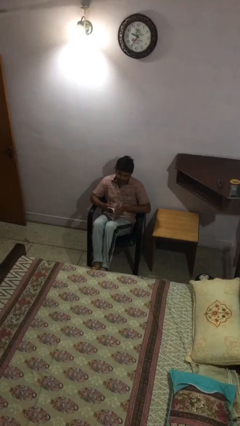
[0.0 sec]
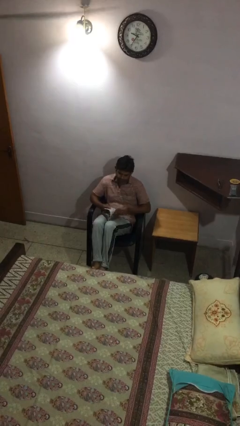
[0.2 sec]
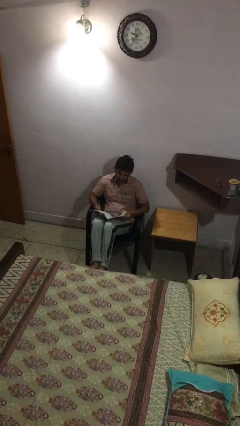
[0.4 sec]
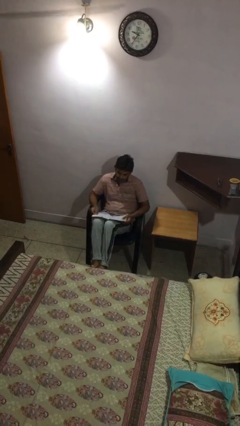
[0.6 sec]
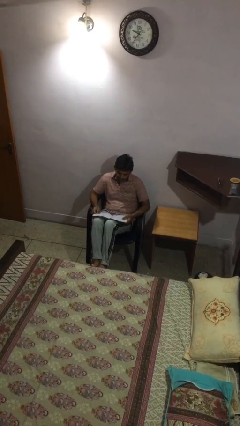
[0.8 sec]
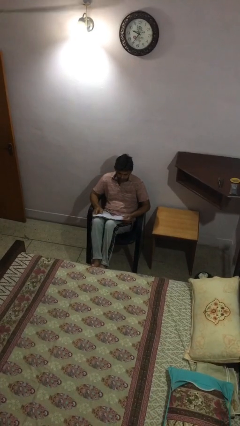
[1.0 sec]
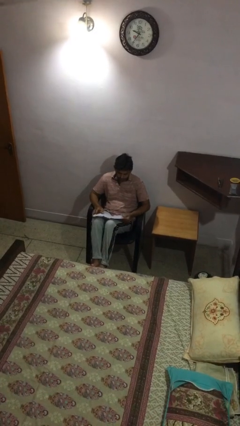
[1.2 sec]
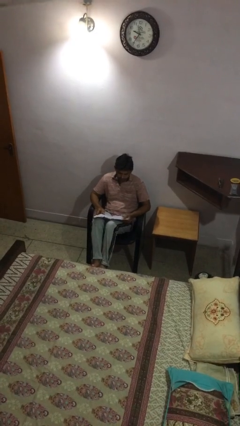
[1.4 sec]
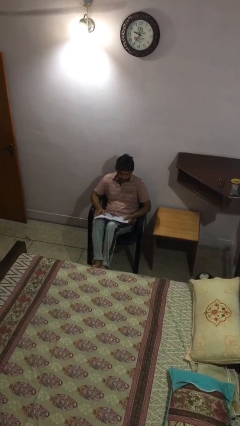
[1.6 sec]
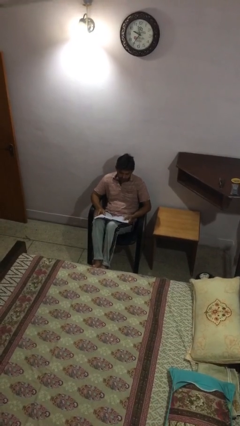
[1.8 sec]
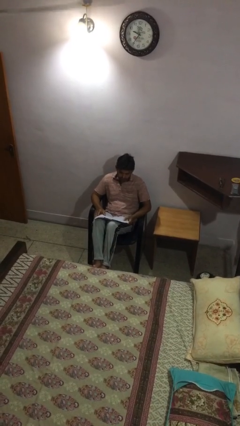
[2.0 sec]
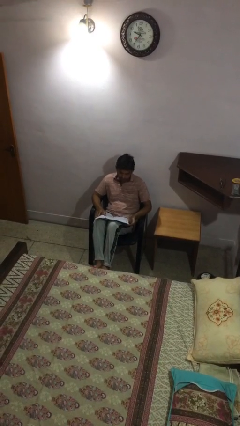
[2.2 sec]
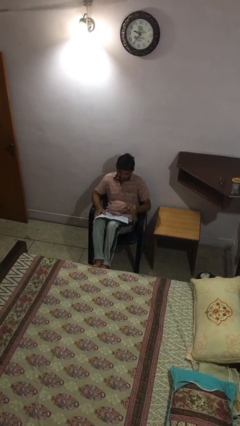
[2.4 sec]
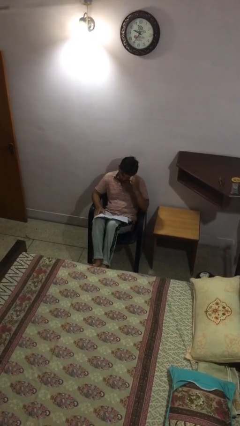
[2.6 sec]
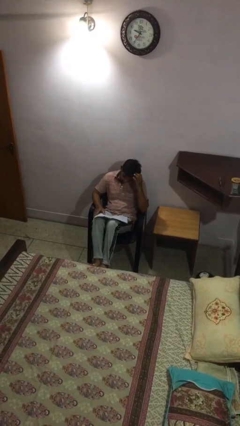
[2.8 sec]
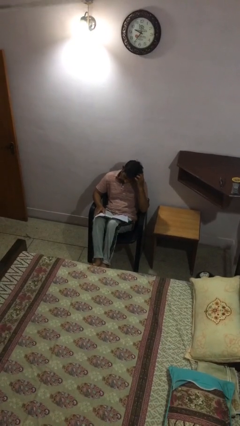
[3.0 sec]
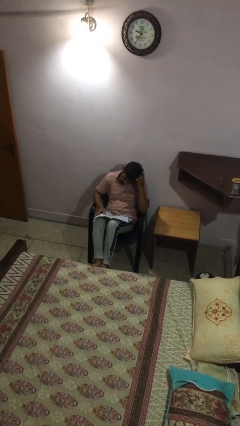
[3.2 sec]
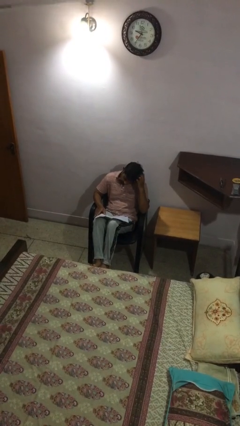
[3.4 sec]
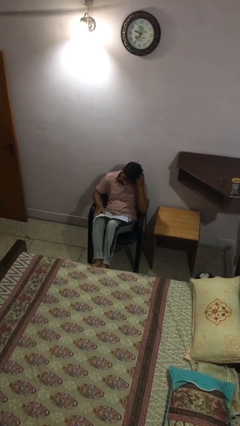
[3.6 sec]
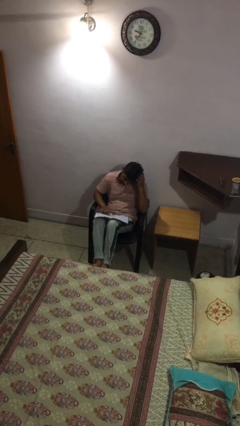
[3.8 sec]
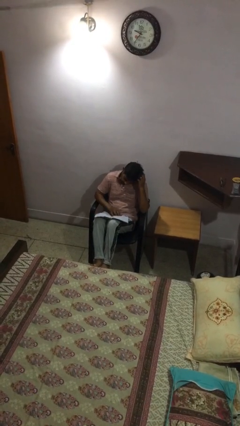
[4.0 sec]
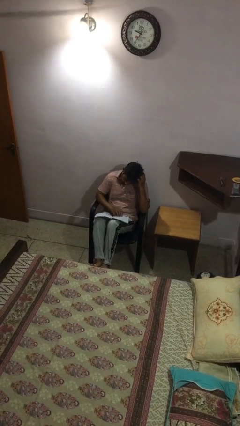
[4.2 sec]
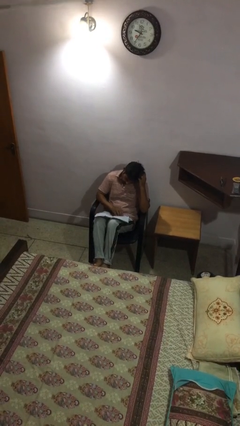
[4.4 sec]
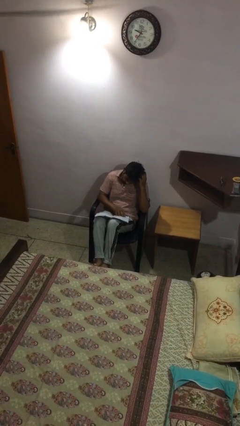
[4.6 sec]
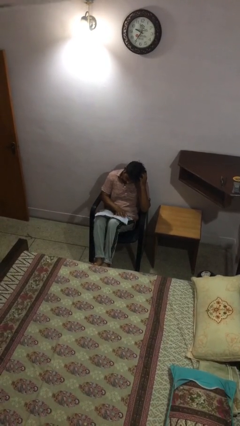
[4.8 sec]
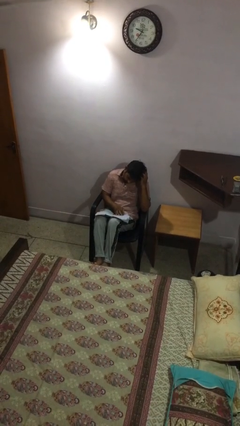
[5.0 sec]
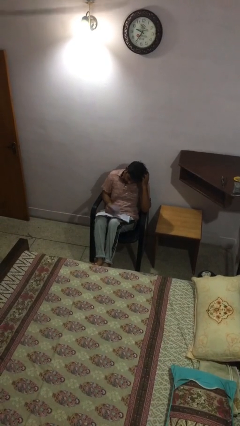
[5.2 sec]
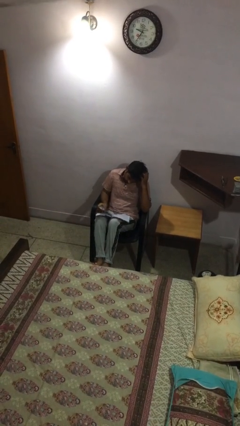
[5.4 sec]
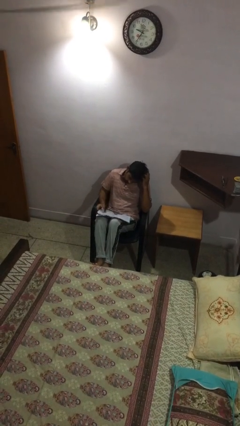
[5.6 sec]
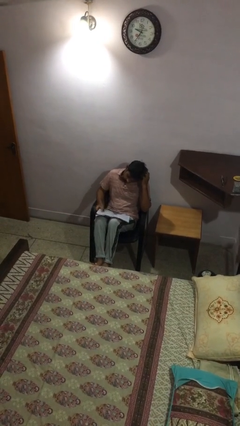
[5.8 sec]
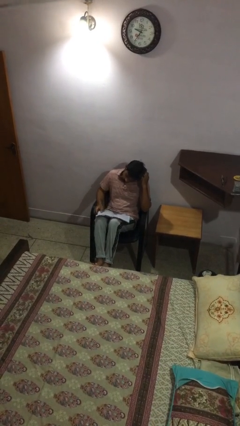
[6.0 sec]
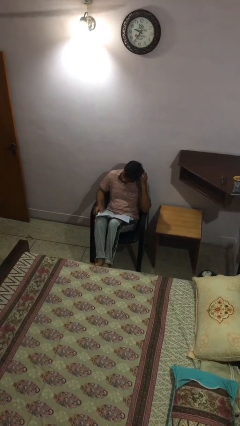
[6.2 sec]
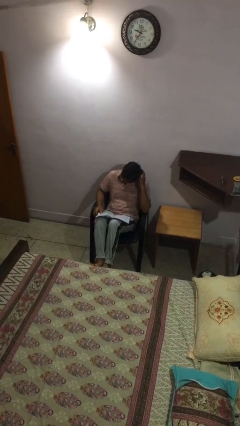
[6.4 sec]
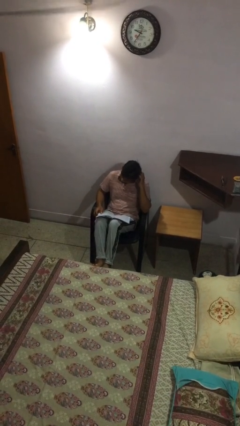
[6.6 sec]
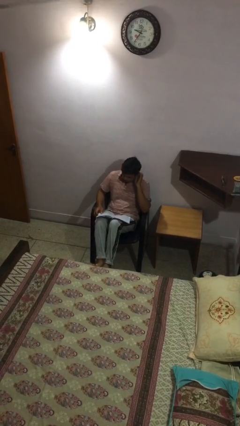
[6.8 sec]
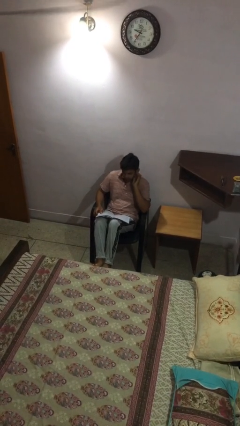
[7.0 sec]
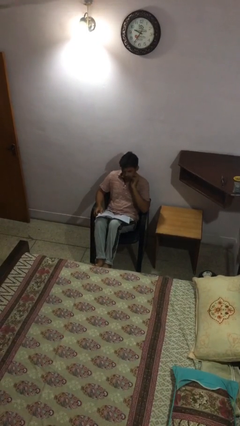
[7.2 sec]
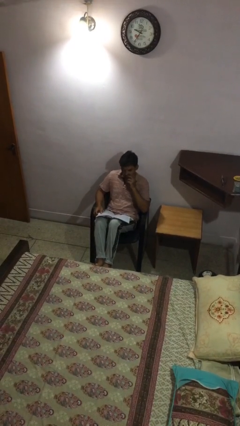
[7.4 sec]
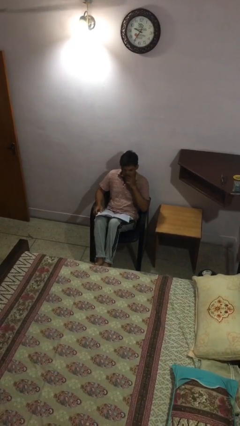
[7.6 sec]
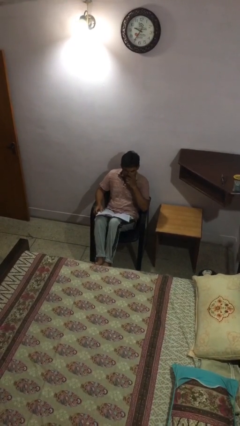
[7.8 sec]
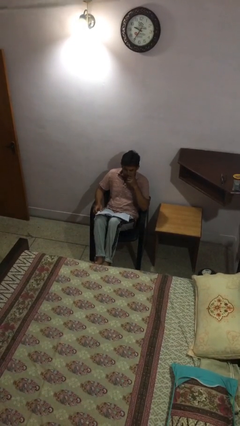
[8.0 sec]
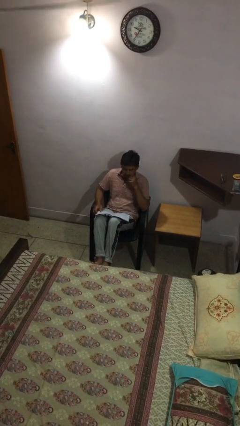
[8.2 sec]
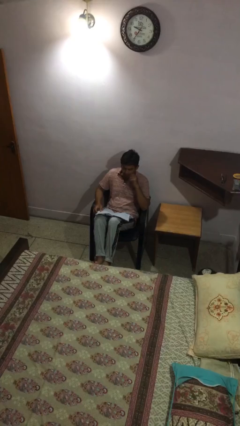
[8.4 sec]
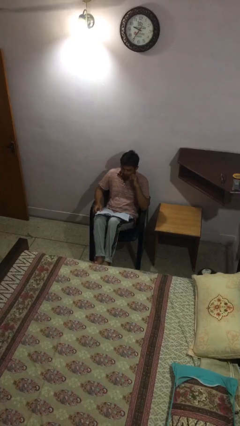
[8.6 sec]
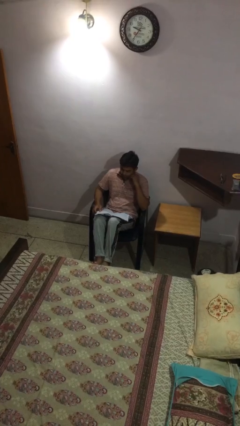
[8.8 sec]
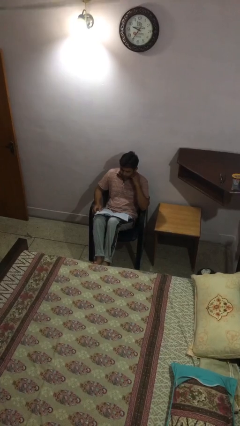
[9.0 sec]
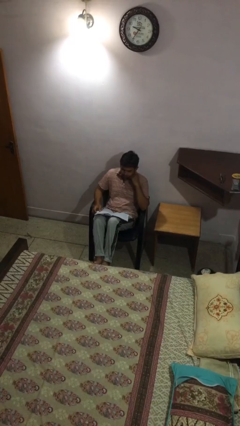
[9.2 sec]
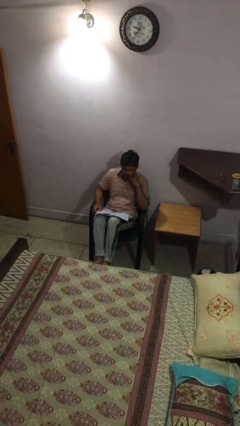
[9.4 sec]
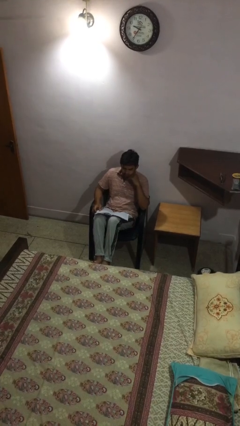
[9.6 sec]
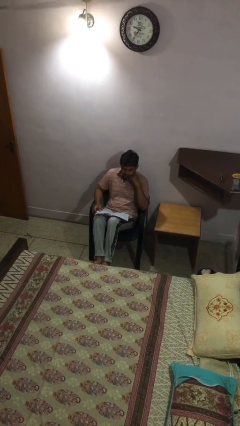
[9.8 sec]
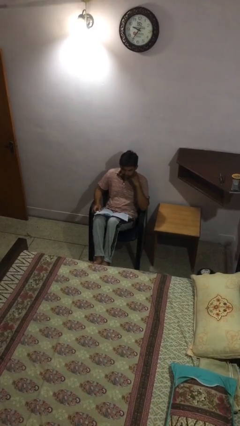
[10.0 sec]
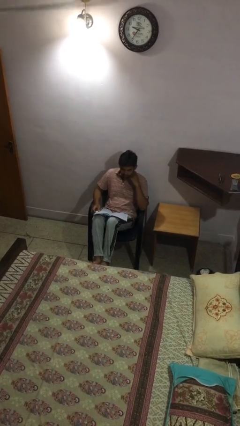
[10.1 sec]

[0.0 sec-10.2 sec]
person reads document

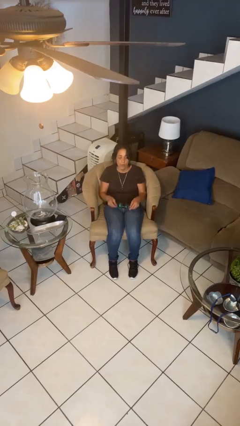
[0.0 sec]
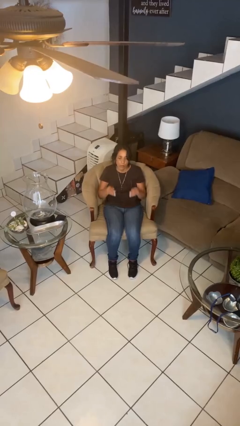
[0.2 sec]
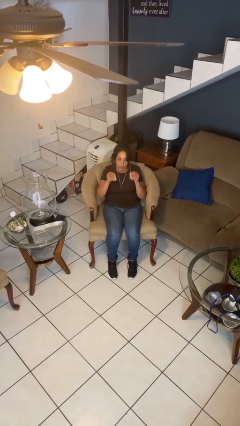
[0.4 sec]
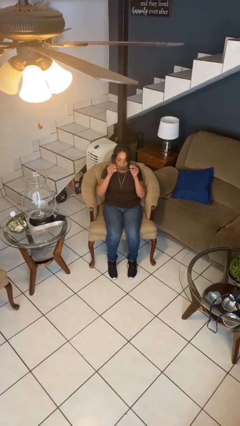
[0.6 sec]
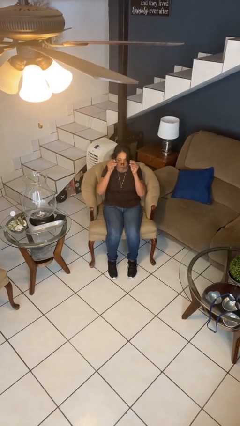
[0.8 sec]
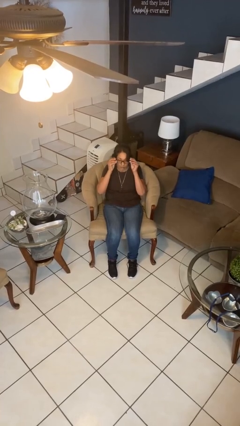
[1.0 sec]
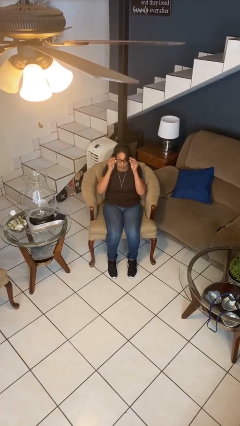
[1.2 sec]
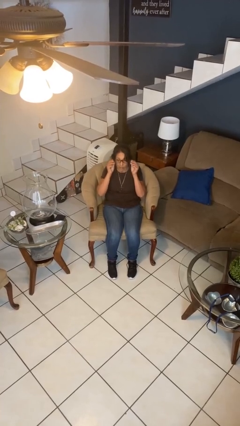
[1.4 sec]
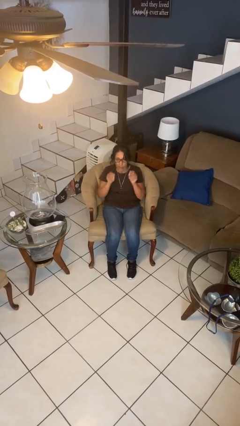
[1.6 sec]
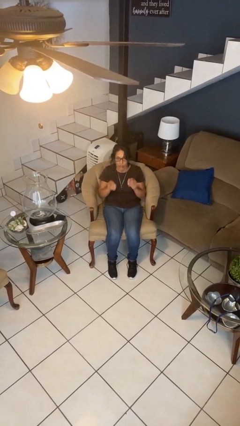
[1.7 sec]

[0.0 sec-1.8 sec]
person puts on glasses

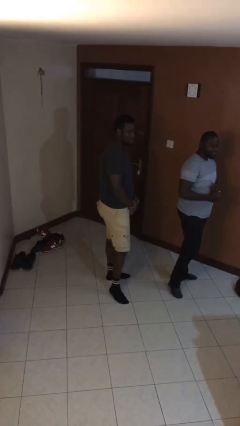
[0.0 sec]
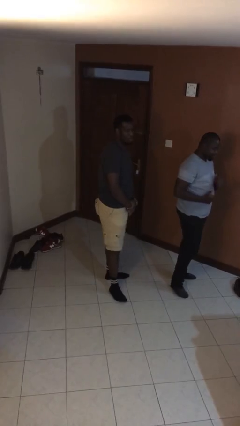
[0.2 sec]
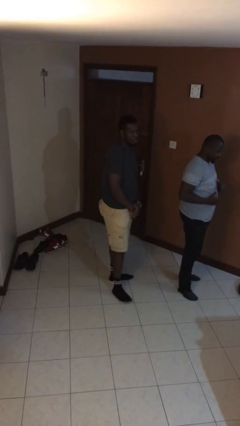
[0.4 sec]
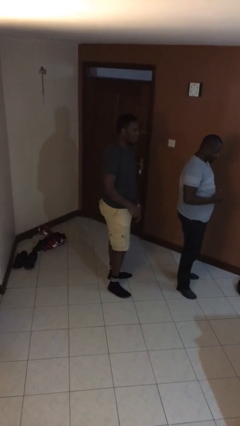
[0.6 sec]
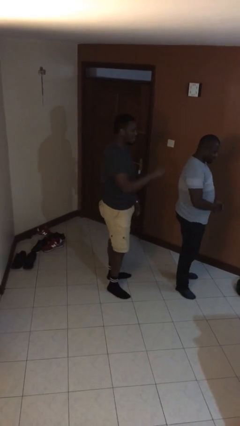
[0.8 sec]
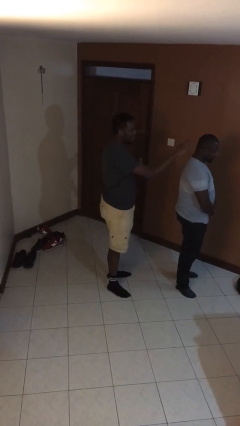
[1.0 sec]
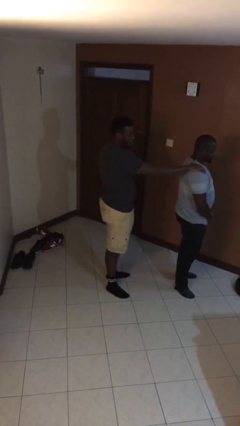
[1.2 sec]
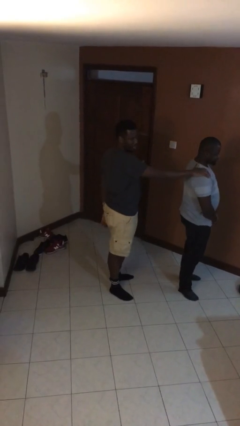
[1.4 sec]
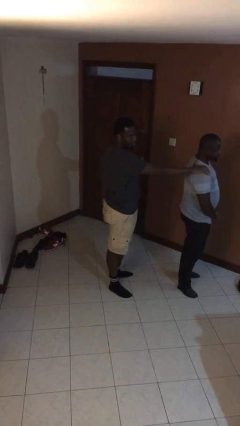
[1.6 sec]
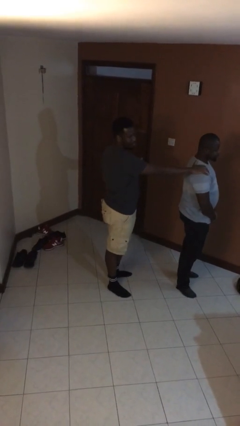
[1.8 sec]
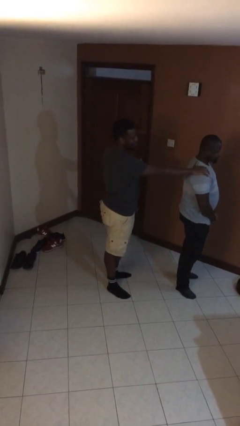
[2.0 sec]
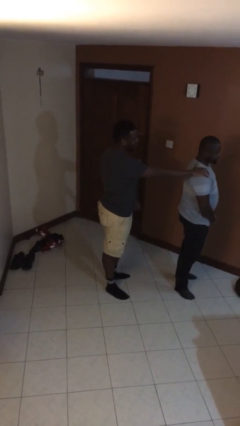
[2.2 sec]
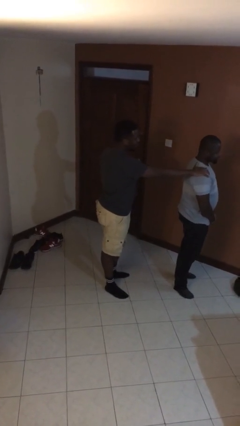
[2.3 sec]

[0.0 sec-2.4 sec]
person grabs person by shoulder

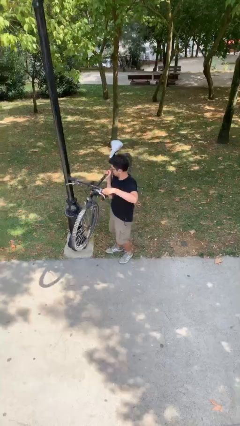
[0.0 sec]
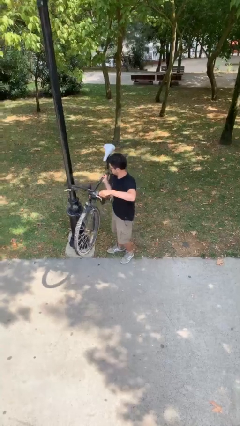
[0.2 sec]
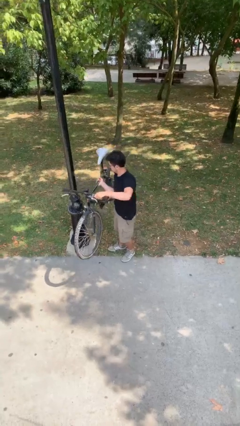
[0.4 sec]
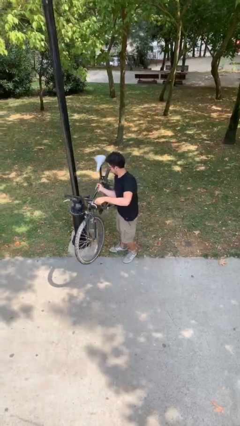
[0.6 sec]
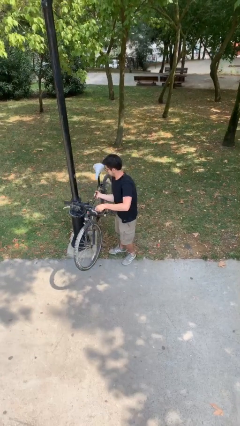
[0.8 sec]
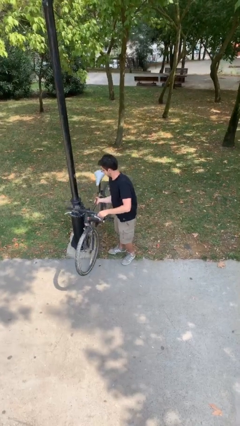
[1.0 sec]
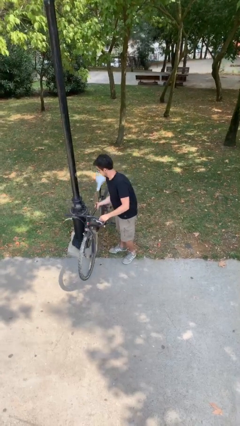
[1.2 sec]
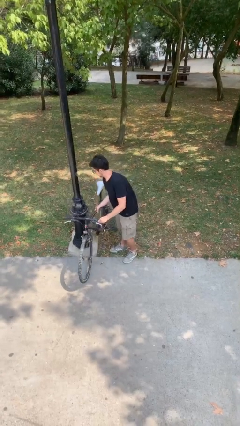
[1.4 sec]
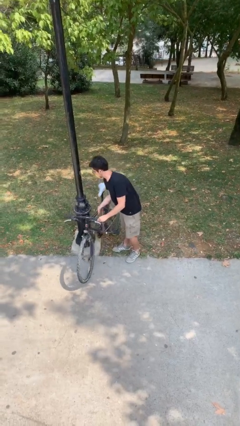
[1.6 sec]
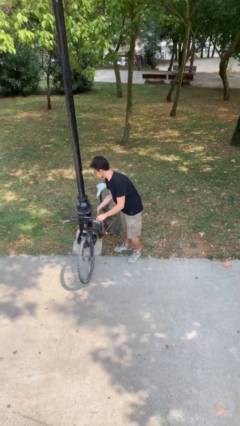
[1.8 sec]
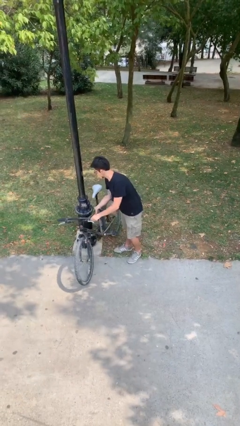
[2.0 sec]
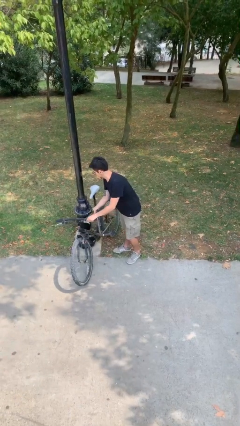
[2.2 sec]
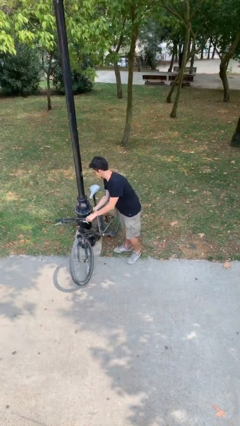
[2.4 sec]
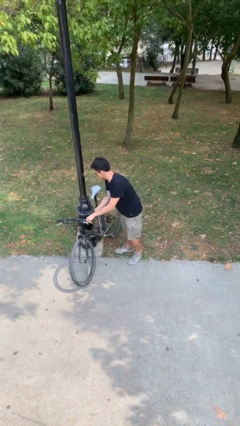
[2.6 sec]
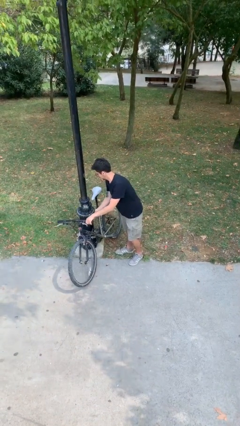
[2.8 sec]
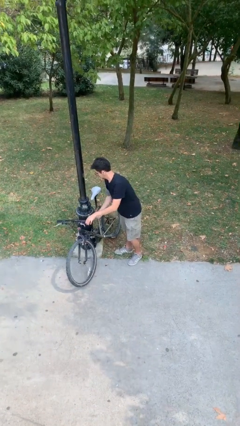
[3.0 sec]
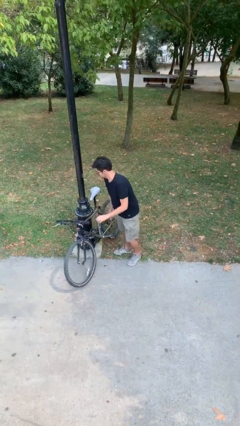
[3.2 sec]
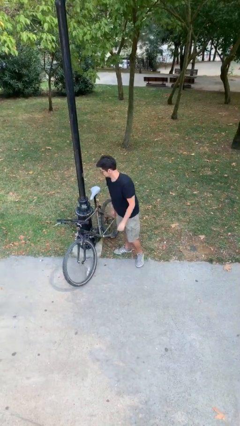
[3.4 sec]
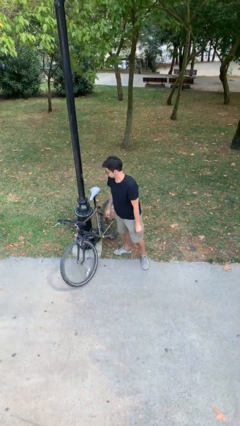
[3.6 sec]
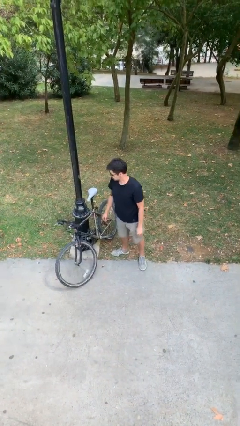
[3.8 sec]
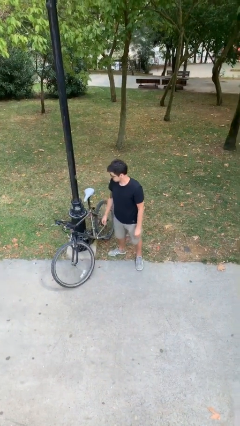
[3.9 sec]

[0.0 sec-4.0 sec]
person puts down object on floor
